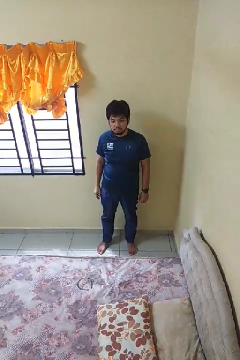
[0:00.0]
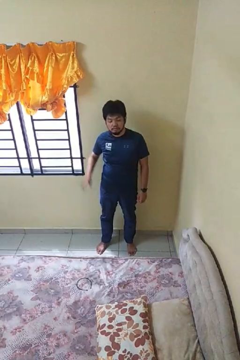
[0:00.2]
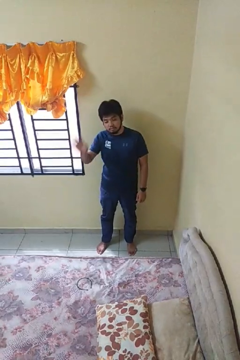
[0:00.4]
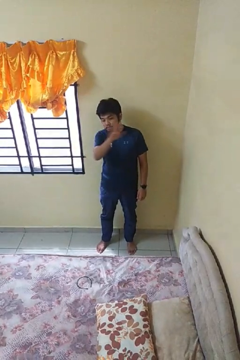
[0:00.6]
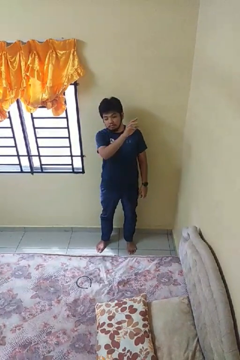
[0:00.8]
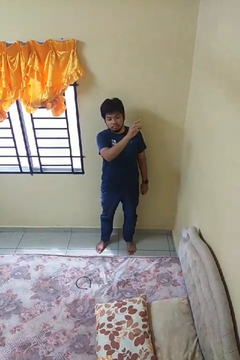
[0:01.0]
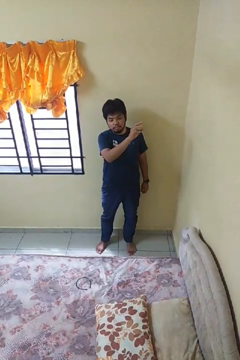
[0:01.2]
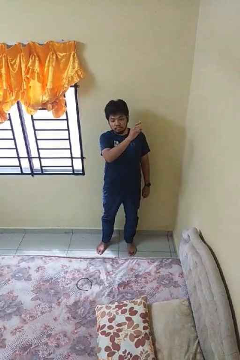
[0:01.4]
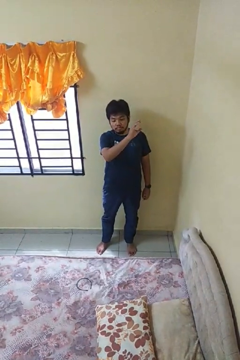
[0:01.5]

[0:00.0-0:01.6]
person gestures swipe left

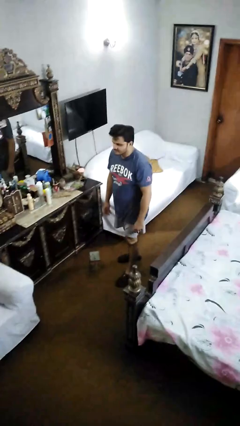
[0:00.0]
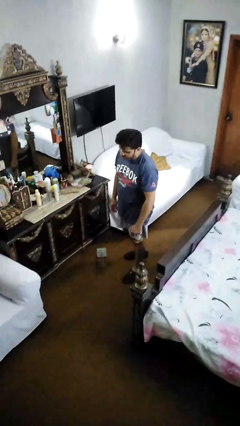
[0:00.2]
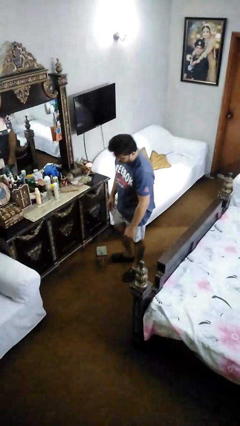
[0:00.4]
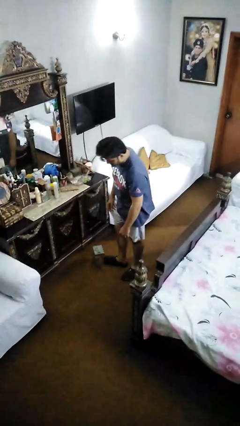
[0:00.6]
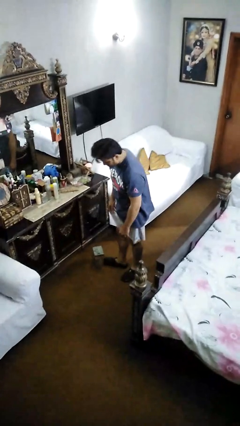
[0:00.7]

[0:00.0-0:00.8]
person trips on object on floor

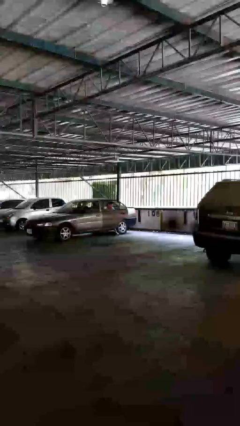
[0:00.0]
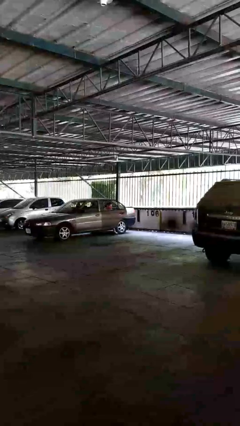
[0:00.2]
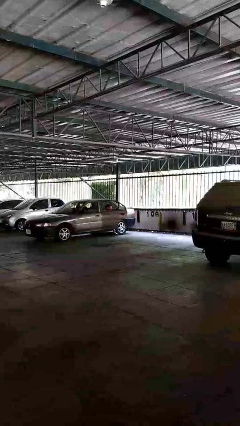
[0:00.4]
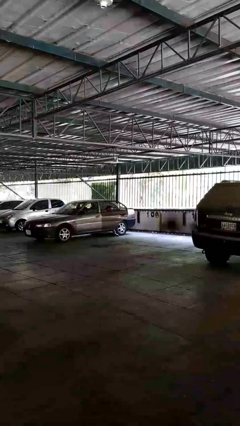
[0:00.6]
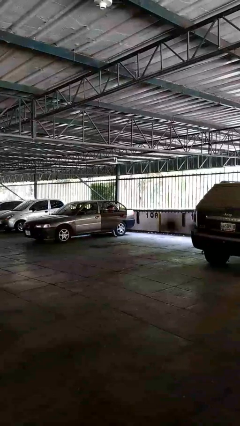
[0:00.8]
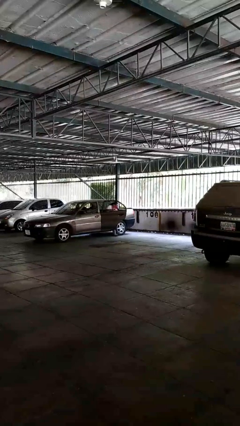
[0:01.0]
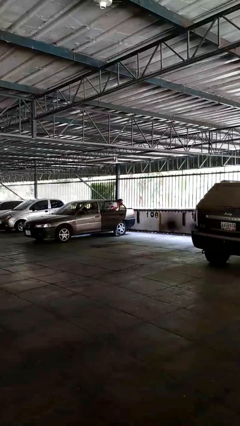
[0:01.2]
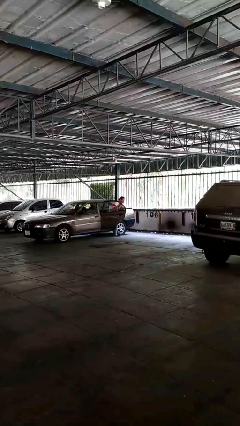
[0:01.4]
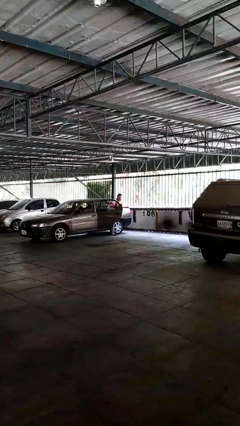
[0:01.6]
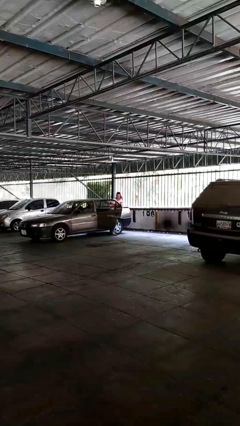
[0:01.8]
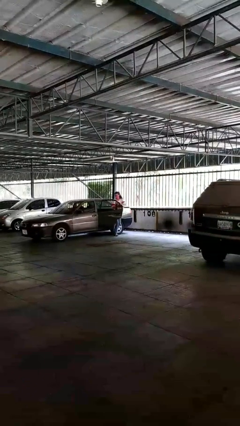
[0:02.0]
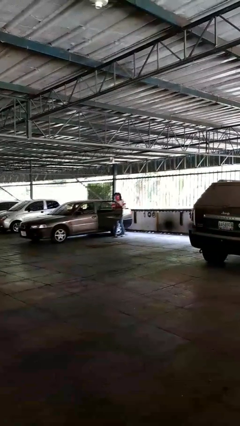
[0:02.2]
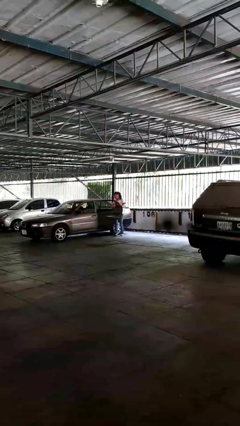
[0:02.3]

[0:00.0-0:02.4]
person exits car

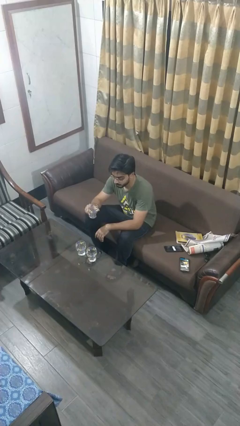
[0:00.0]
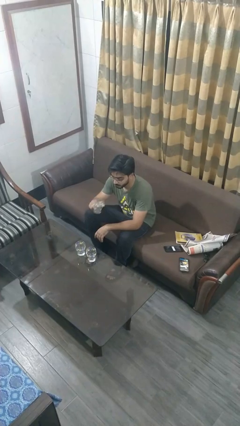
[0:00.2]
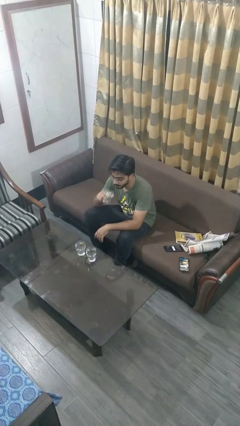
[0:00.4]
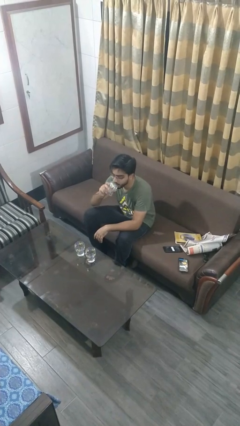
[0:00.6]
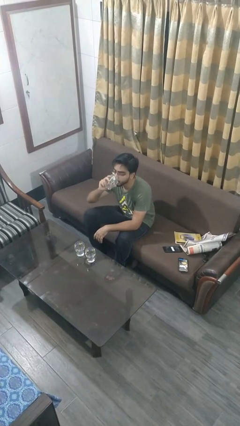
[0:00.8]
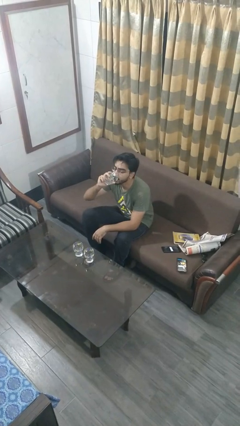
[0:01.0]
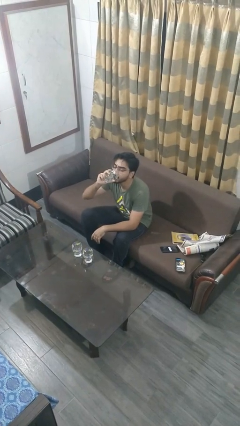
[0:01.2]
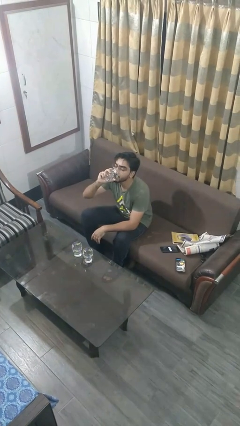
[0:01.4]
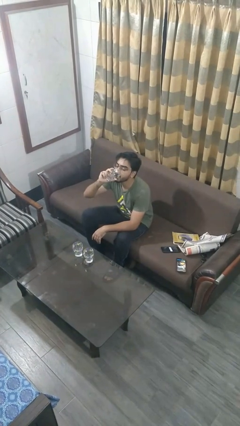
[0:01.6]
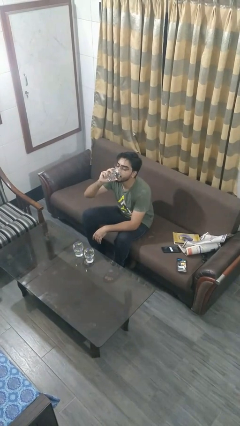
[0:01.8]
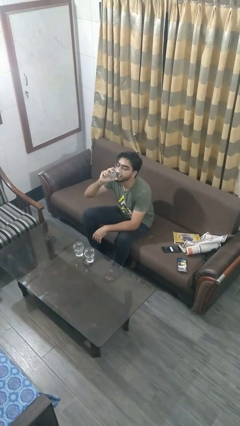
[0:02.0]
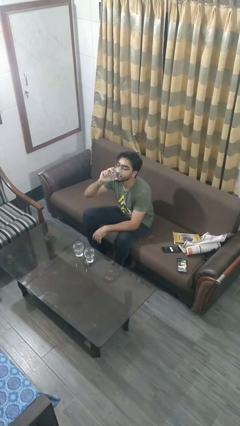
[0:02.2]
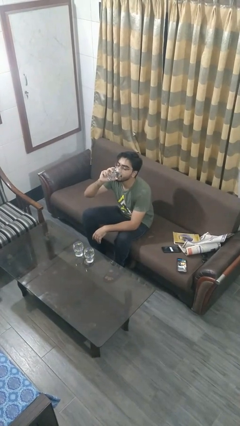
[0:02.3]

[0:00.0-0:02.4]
person drinks from shotglass

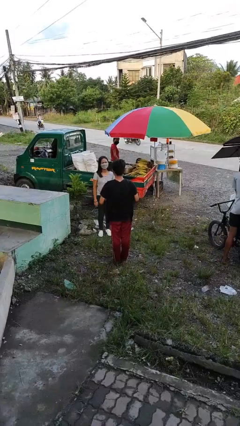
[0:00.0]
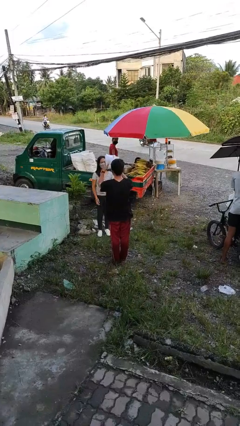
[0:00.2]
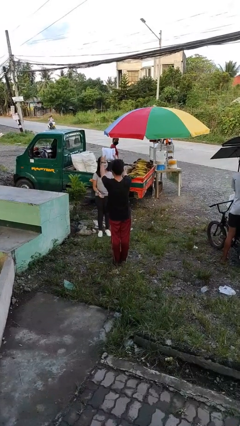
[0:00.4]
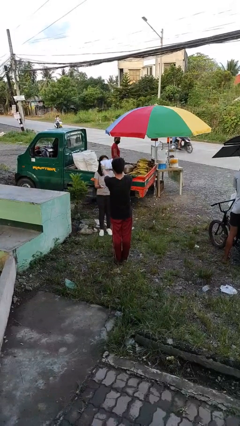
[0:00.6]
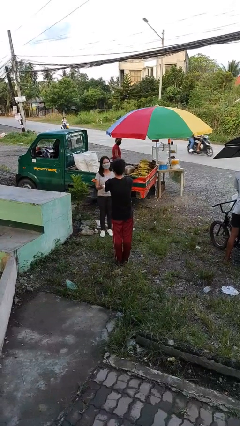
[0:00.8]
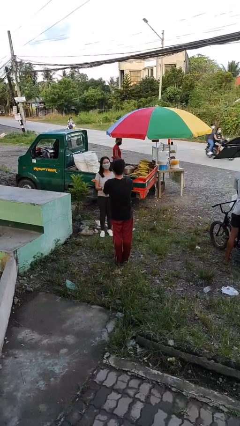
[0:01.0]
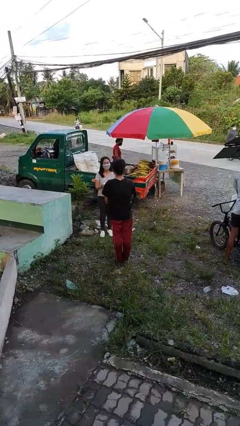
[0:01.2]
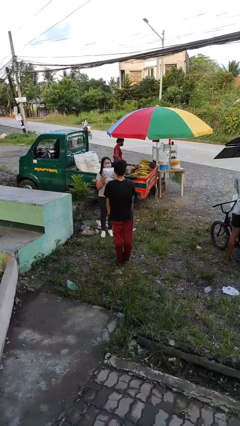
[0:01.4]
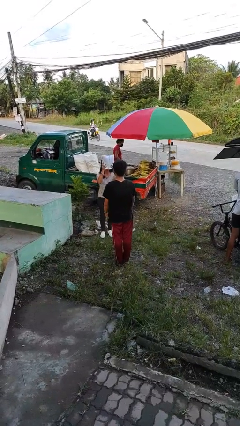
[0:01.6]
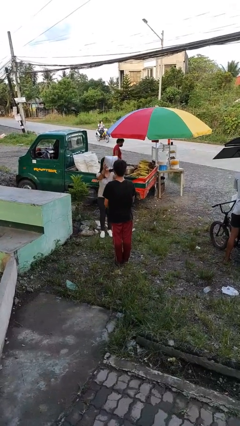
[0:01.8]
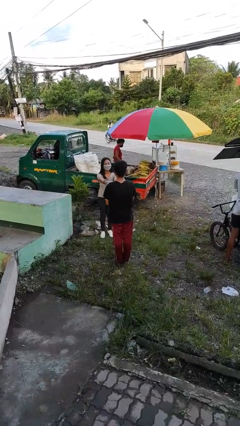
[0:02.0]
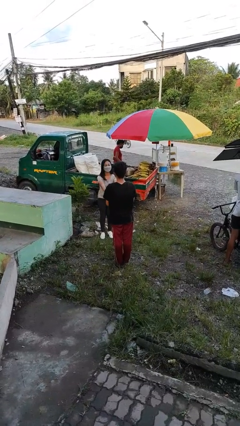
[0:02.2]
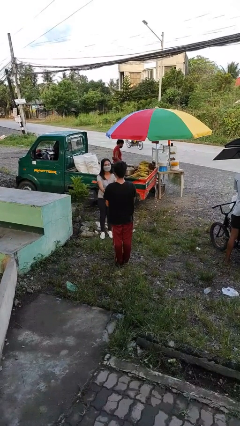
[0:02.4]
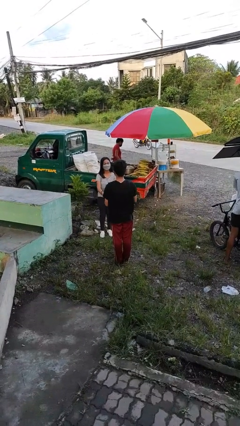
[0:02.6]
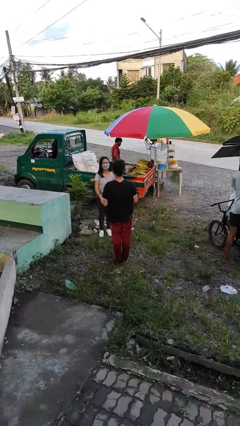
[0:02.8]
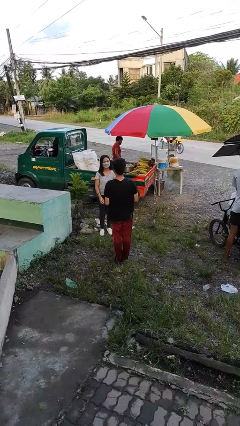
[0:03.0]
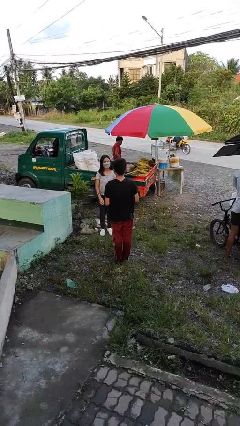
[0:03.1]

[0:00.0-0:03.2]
person transfers object to person

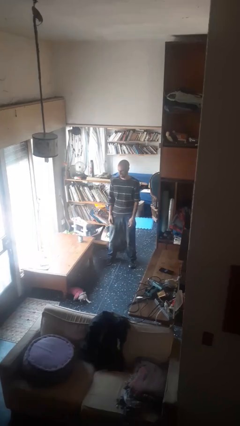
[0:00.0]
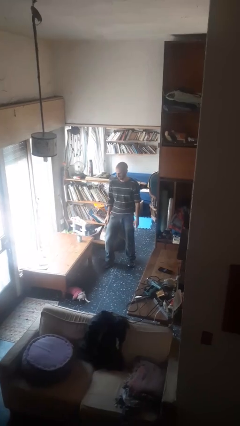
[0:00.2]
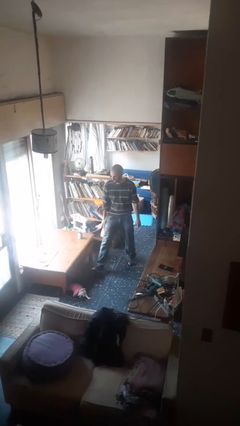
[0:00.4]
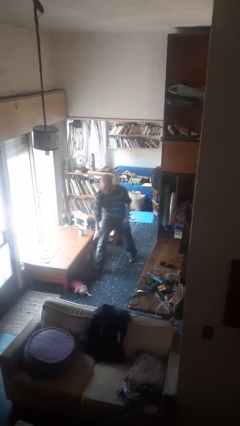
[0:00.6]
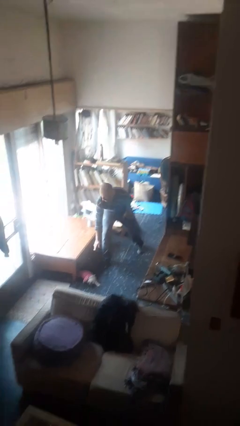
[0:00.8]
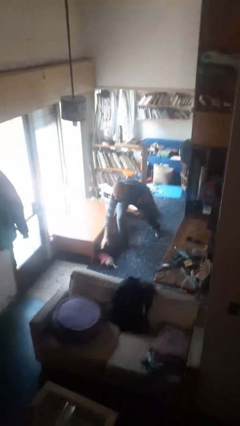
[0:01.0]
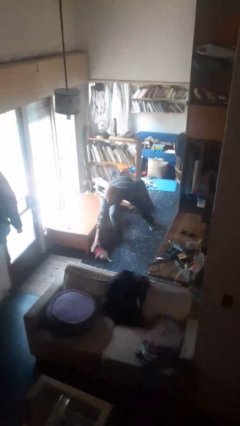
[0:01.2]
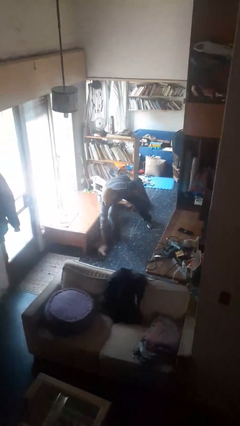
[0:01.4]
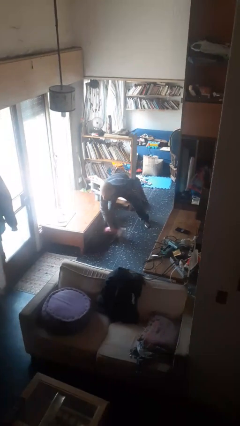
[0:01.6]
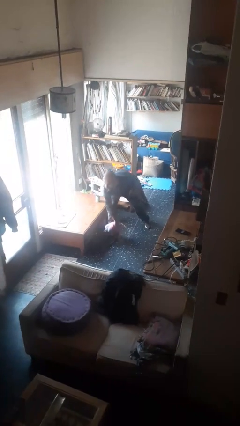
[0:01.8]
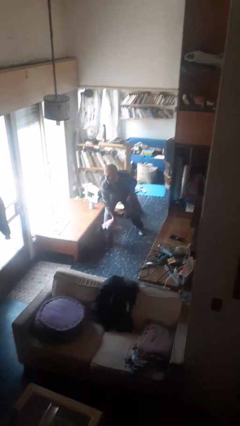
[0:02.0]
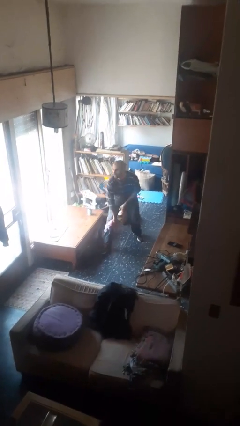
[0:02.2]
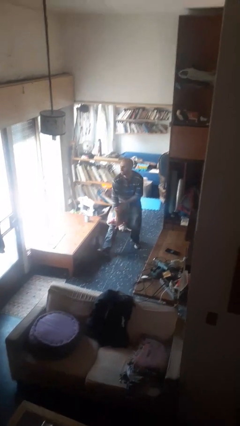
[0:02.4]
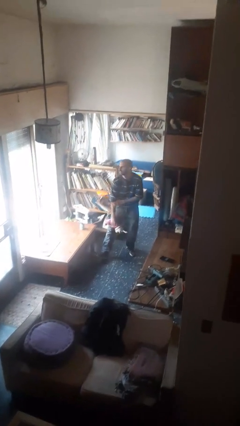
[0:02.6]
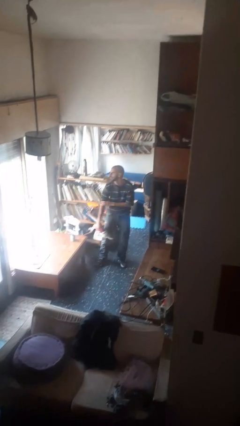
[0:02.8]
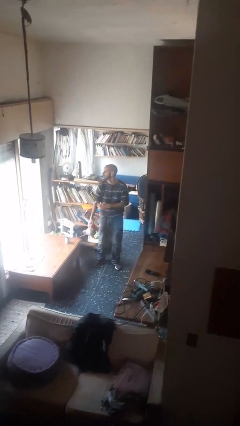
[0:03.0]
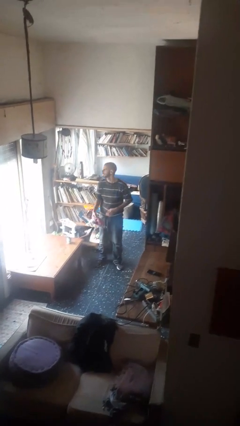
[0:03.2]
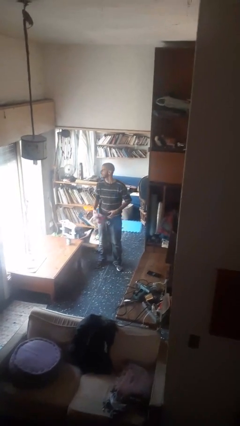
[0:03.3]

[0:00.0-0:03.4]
person picks up object from floor

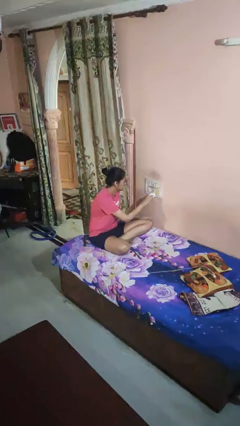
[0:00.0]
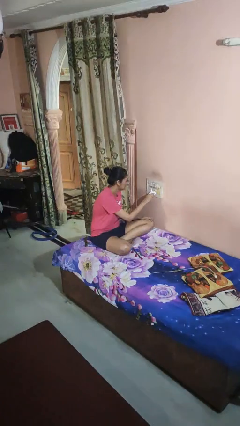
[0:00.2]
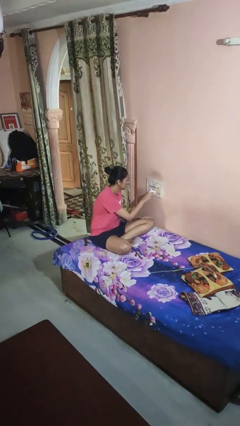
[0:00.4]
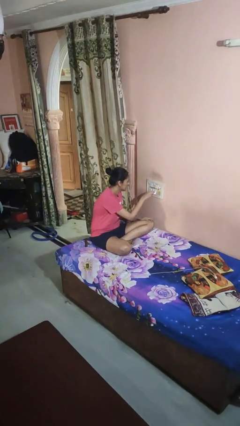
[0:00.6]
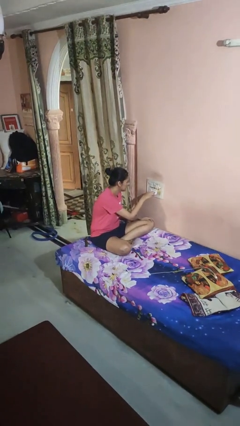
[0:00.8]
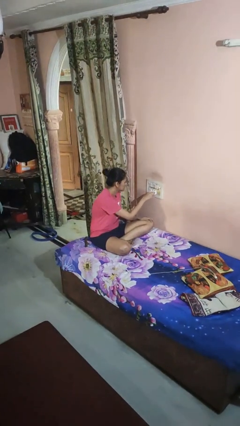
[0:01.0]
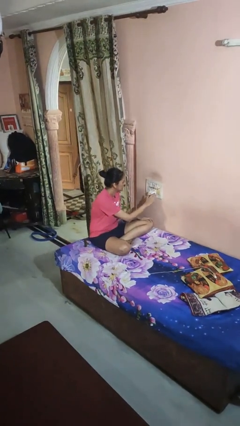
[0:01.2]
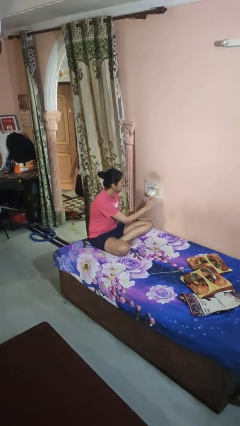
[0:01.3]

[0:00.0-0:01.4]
person plugs into electrical socket

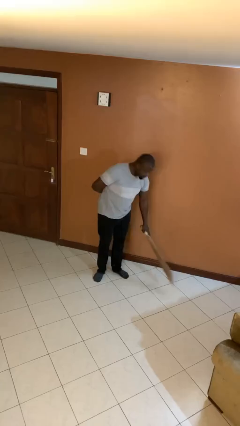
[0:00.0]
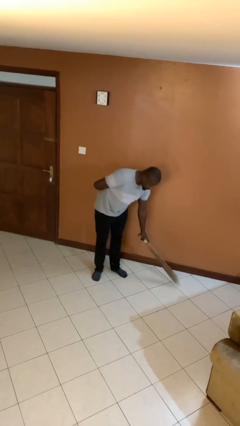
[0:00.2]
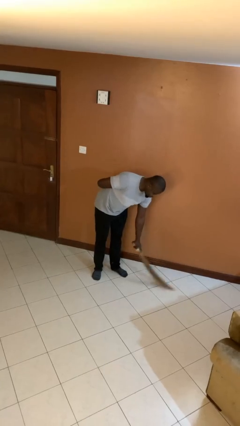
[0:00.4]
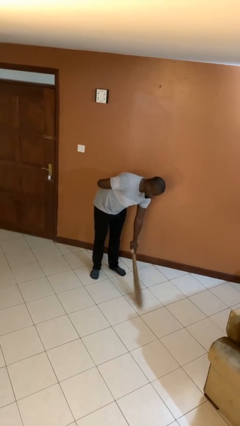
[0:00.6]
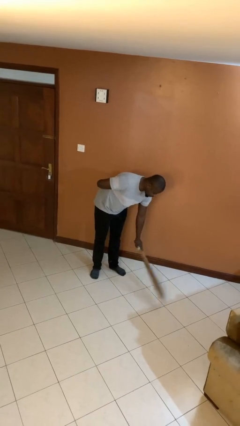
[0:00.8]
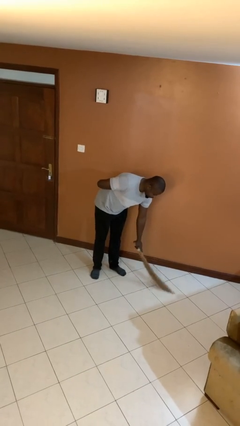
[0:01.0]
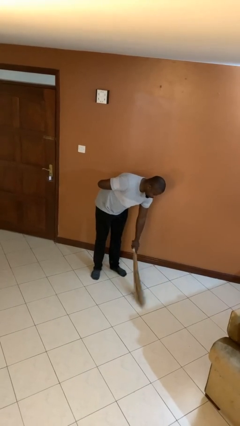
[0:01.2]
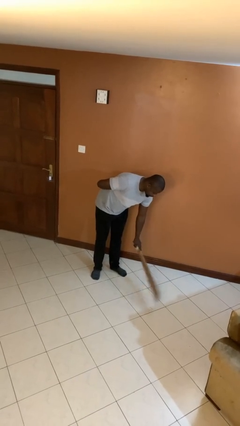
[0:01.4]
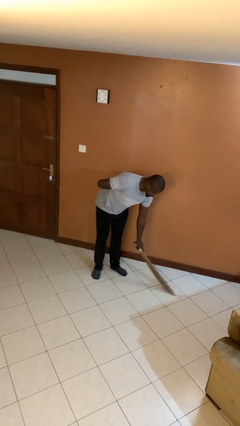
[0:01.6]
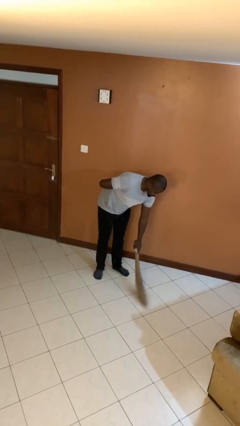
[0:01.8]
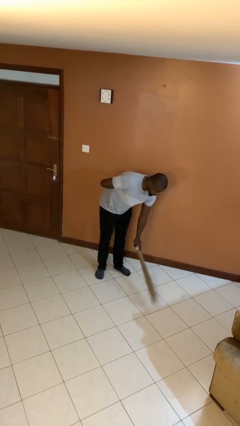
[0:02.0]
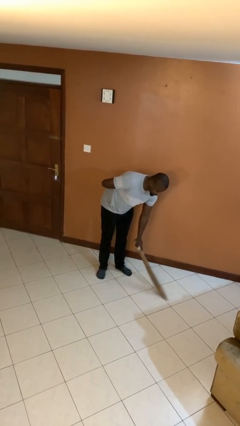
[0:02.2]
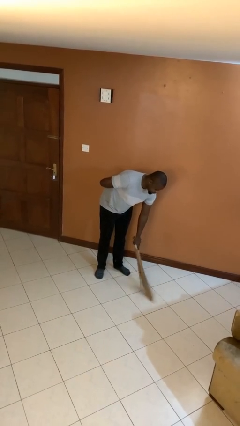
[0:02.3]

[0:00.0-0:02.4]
person sweeps floor
